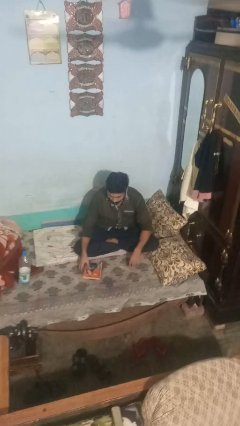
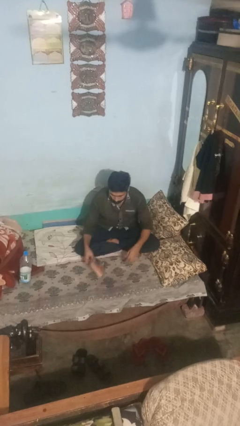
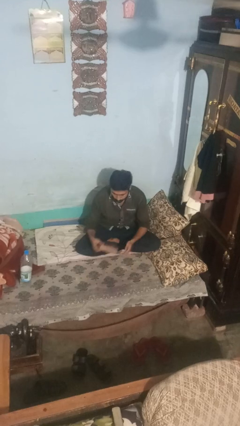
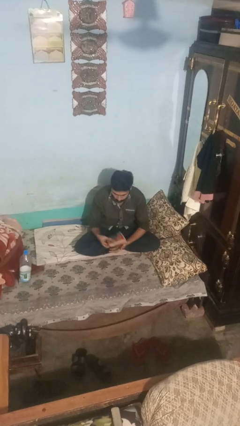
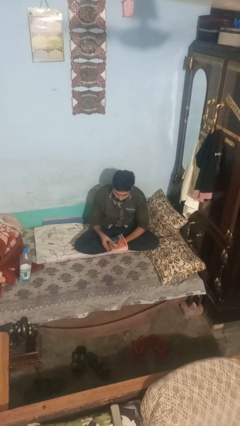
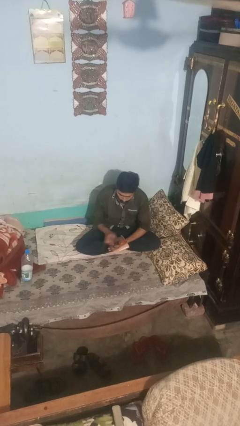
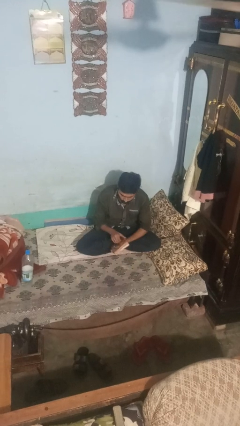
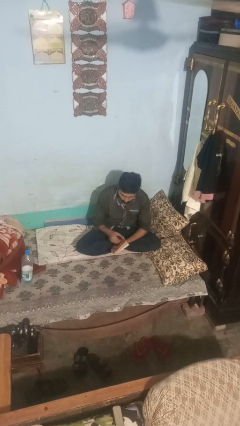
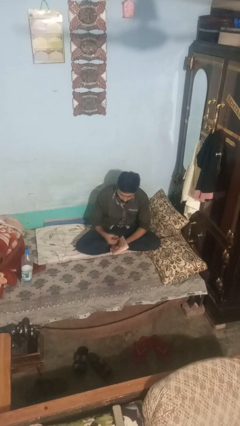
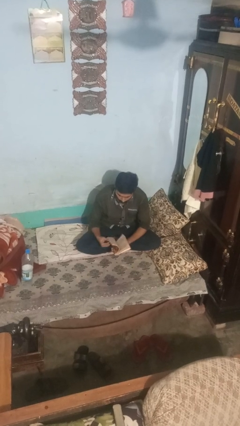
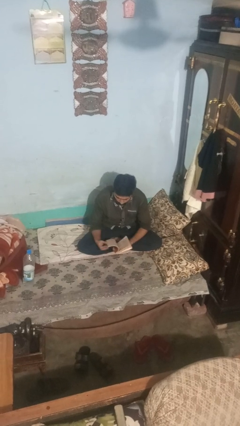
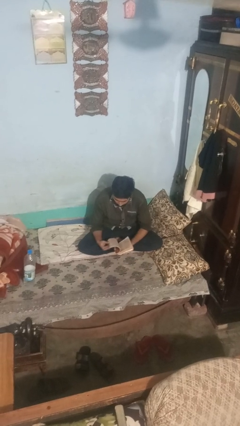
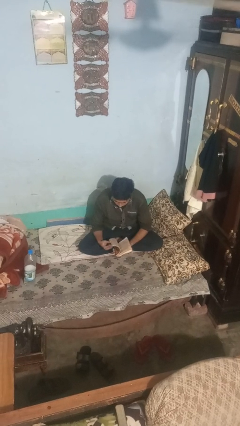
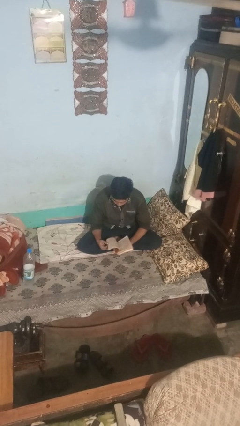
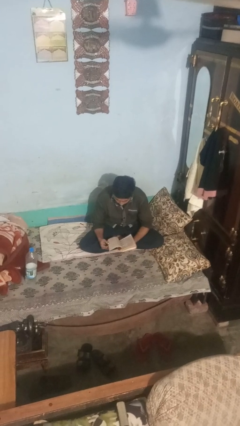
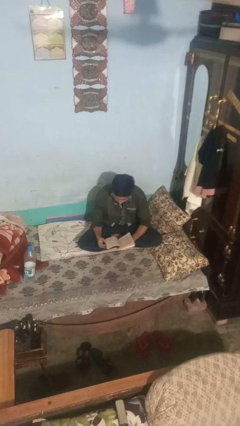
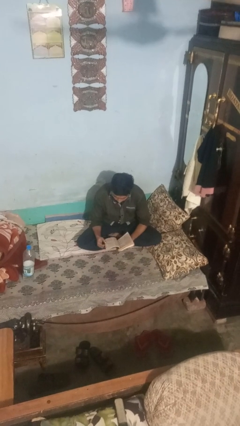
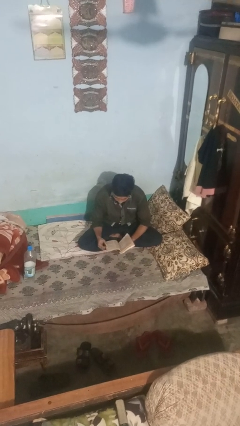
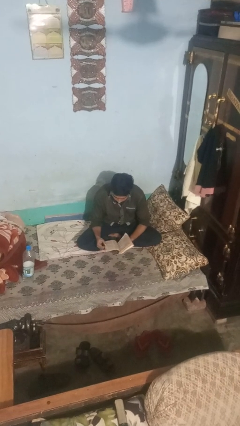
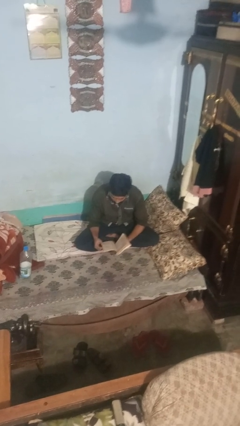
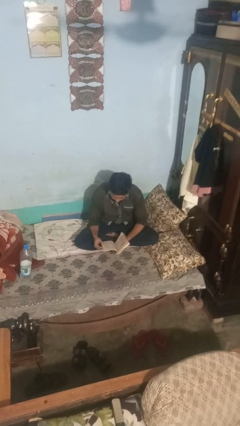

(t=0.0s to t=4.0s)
person reads magazine

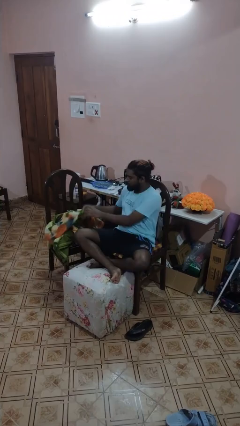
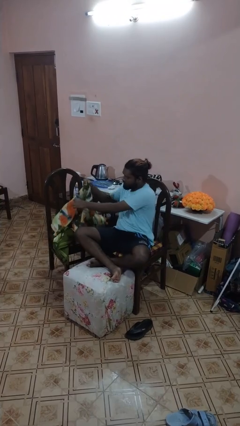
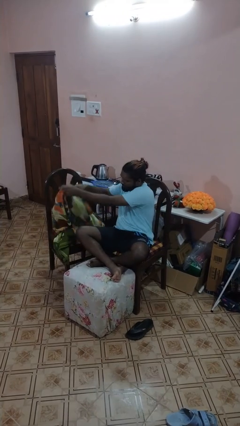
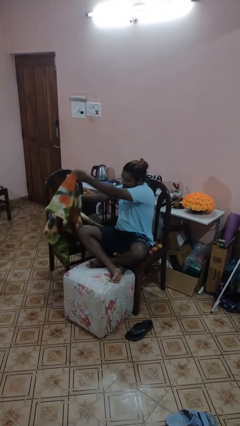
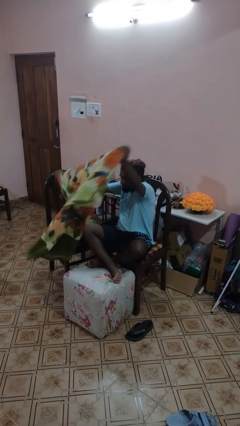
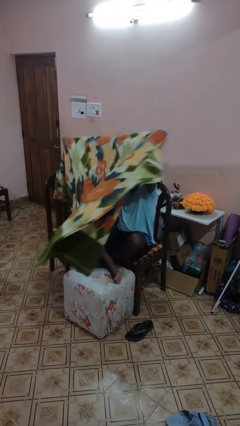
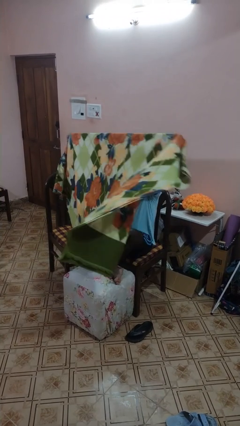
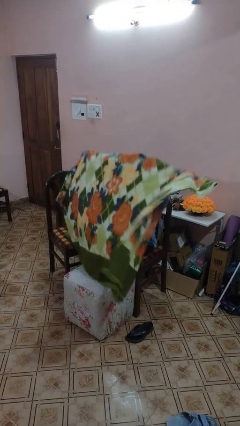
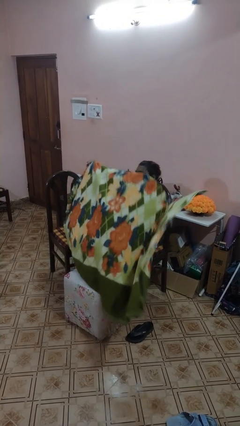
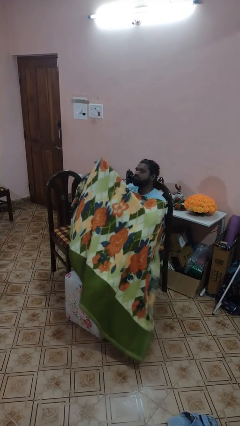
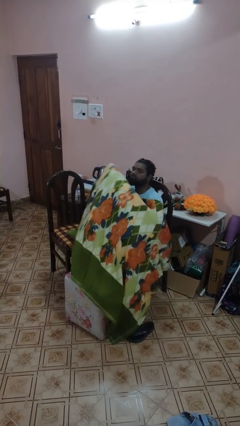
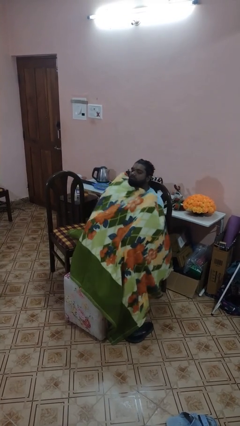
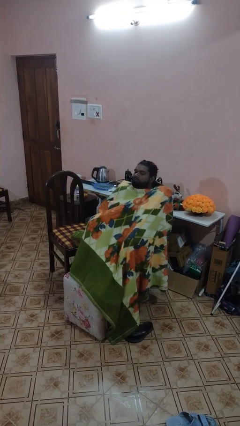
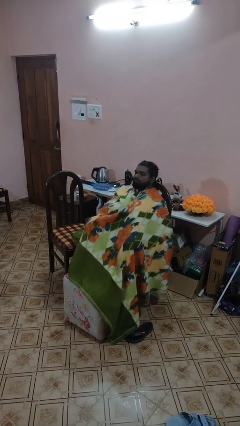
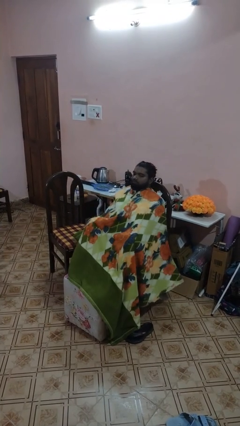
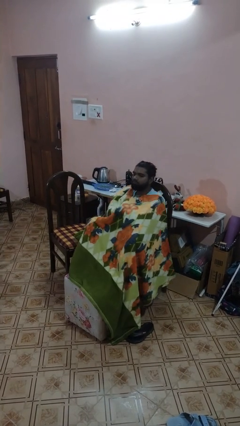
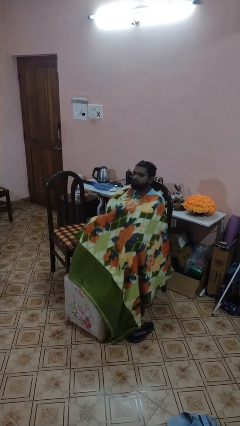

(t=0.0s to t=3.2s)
person covers with blanket

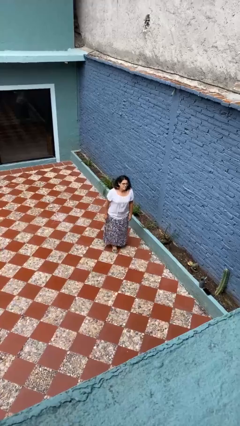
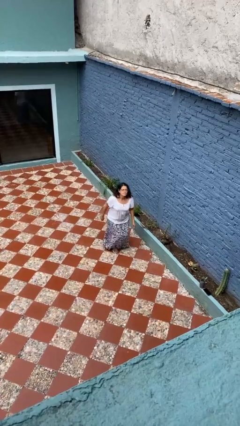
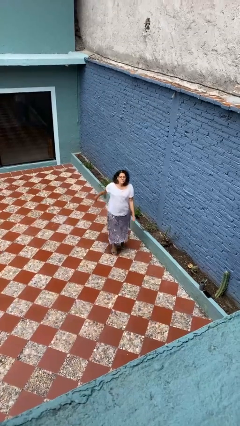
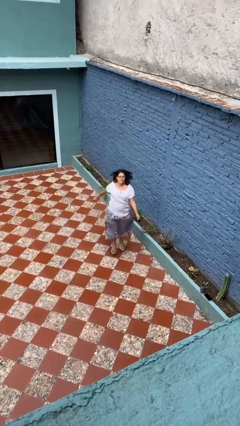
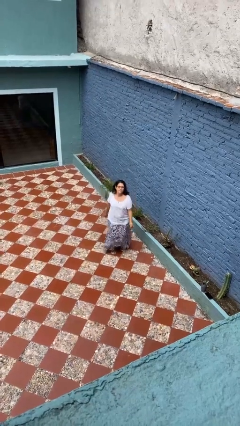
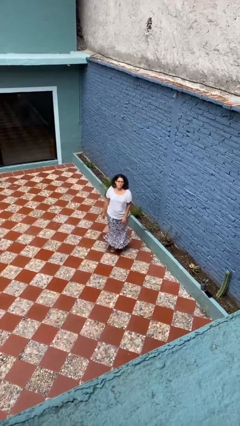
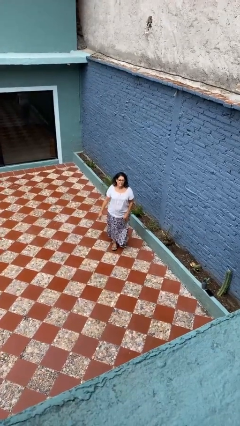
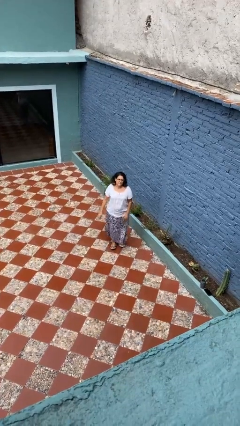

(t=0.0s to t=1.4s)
person jumps

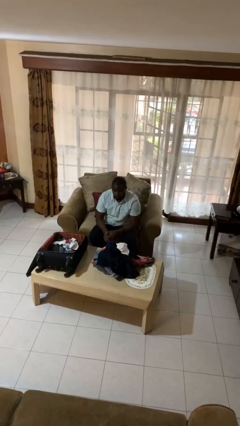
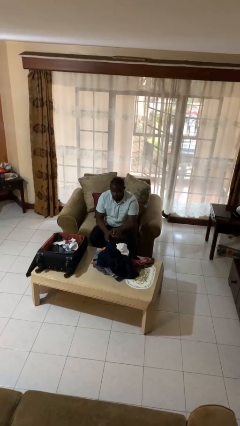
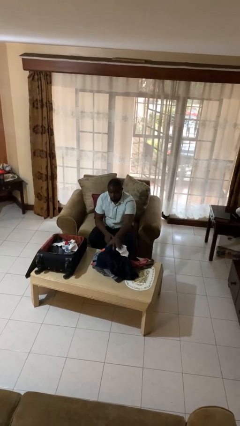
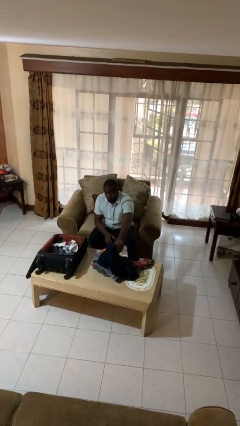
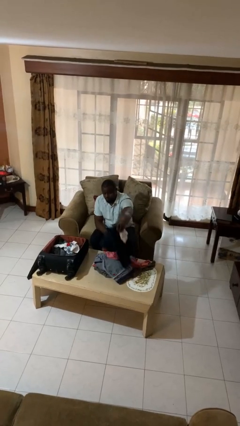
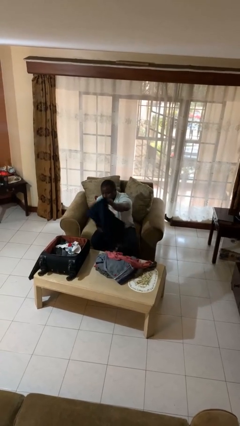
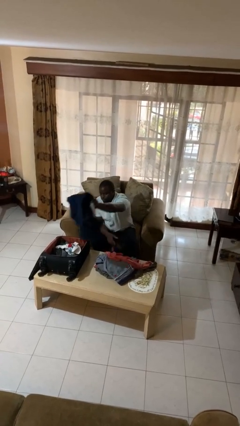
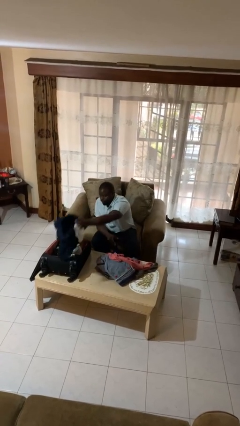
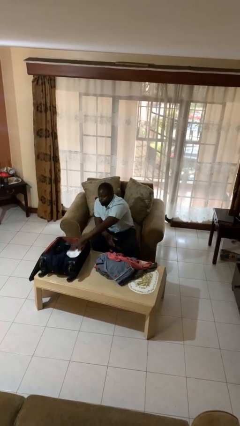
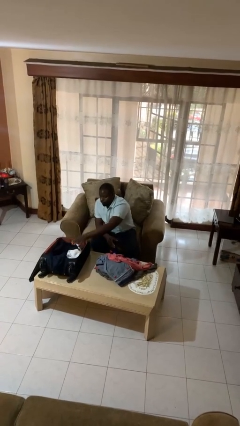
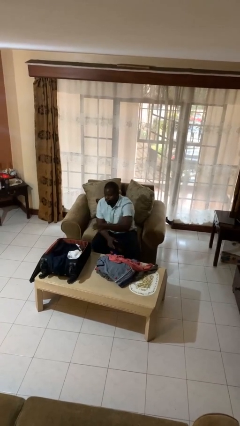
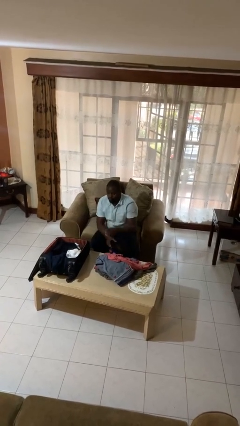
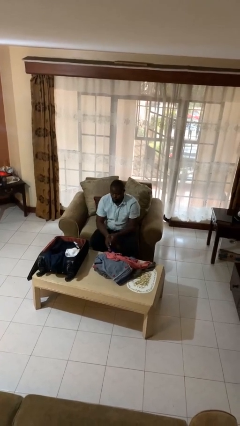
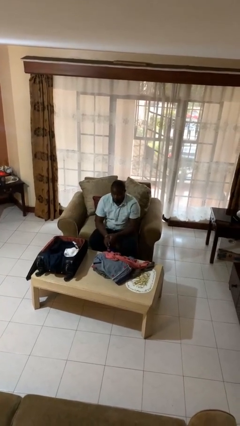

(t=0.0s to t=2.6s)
person loads clothes into suitcase

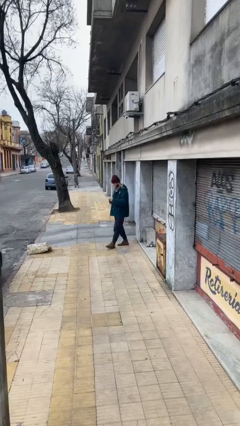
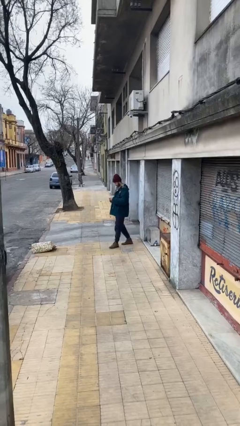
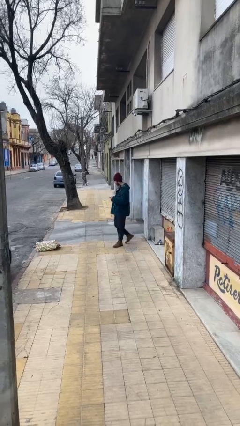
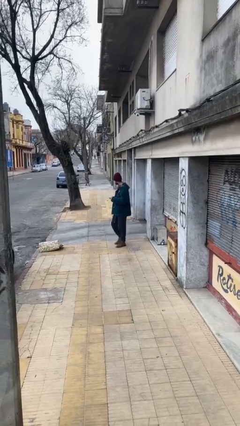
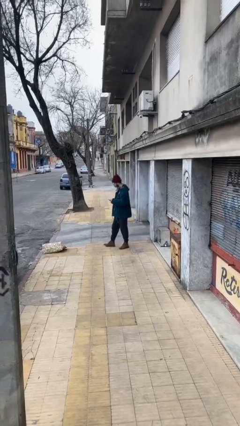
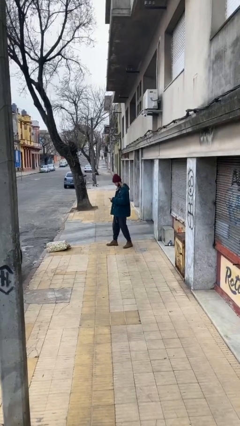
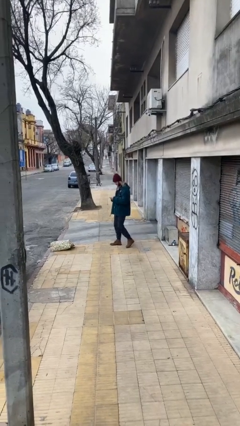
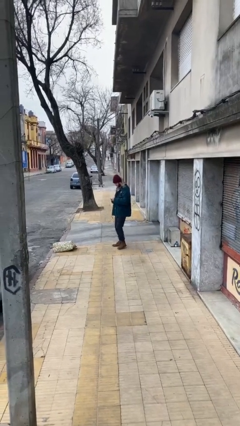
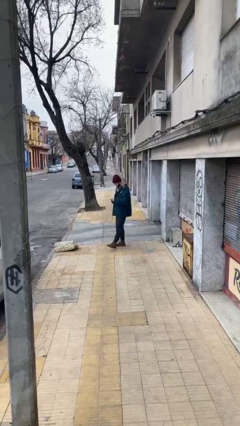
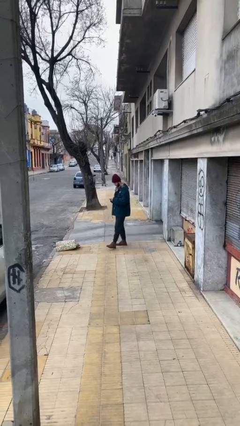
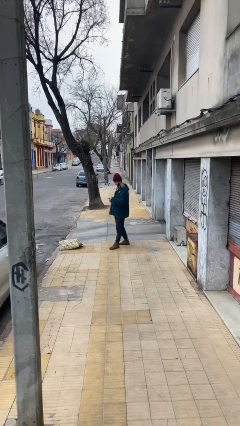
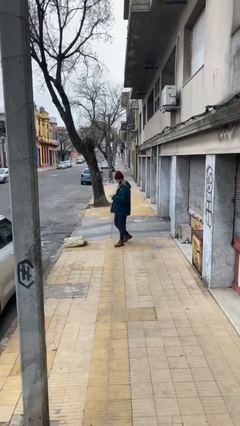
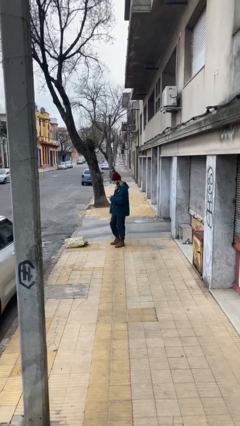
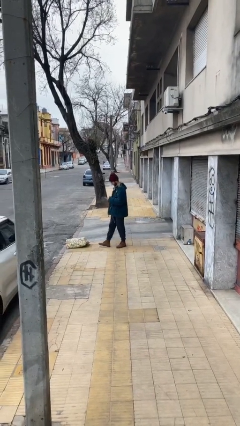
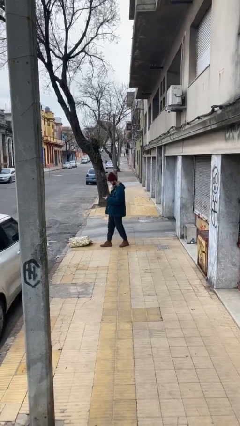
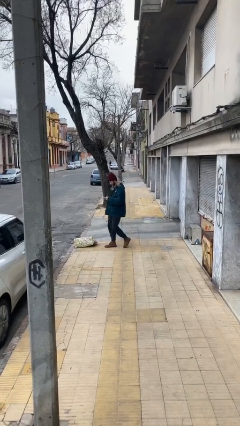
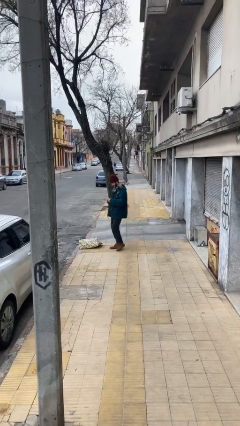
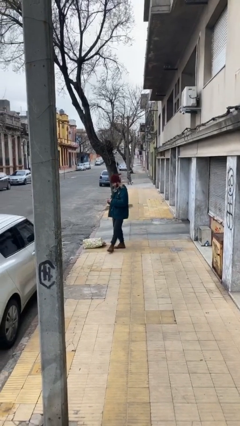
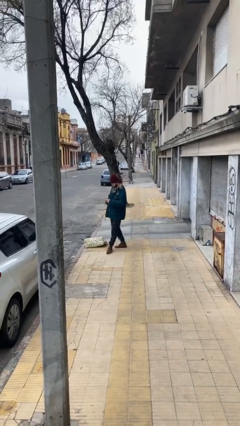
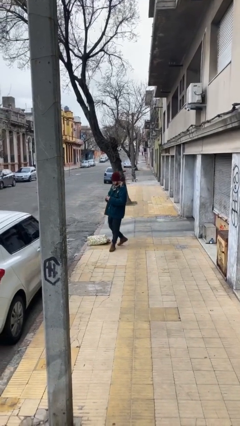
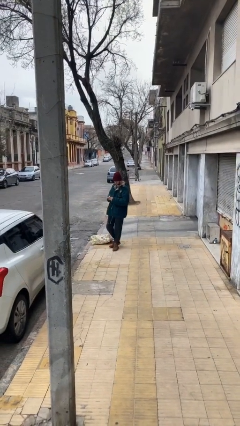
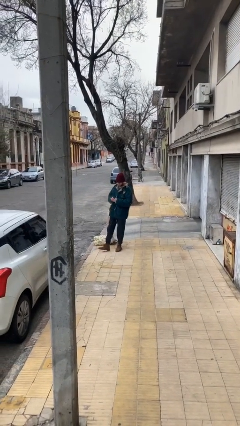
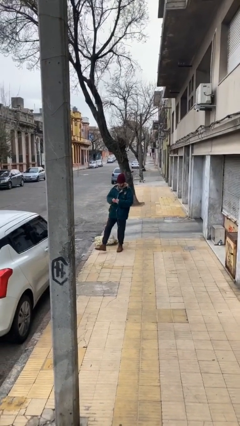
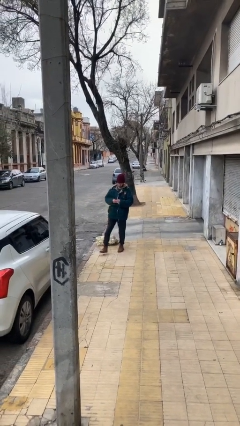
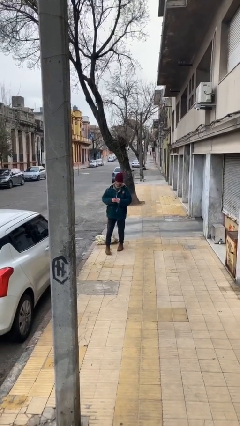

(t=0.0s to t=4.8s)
person texts on phone

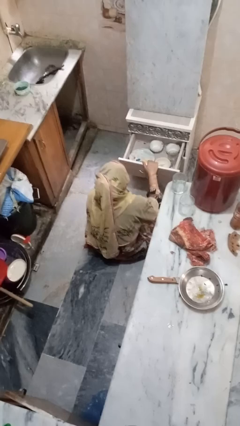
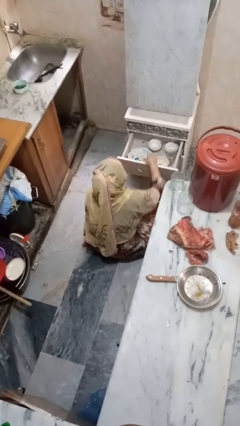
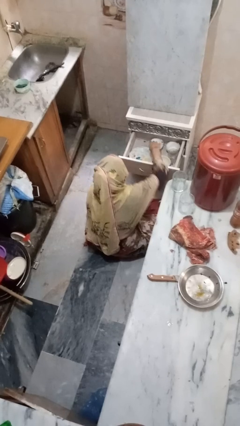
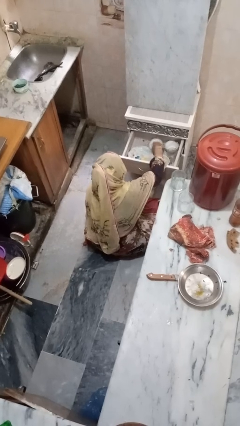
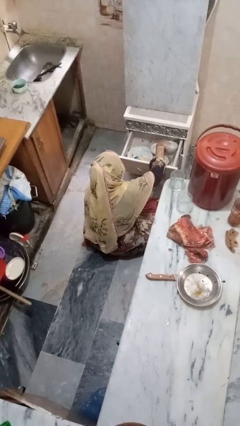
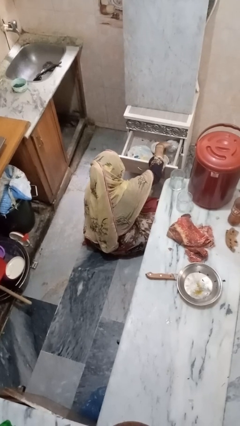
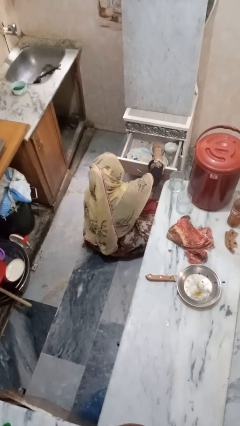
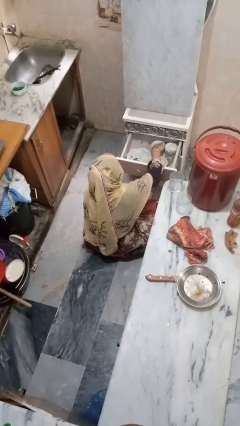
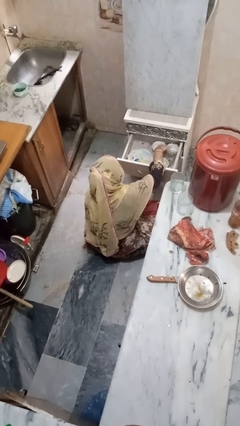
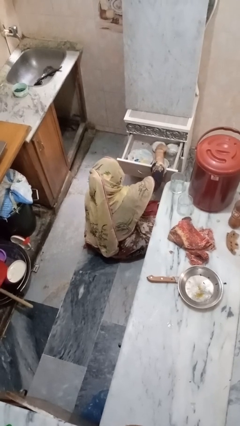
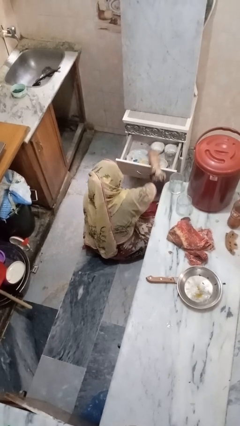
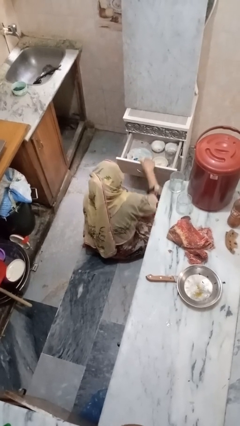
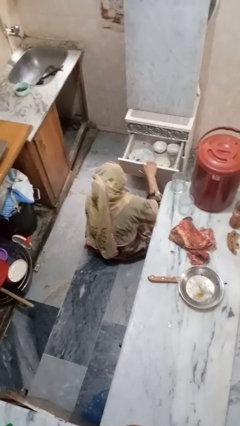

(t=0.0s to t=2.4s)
person searches in kitchen drawer
